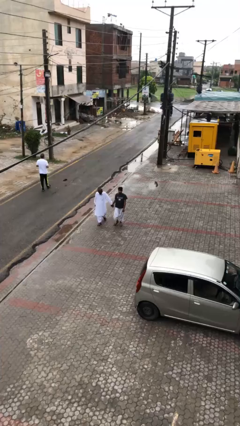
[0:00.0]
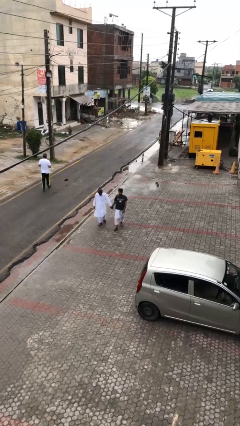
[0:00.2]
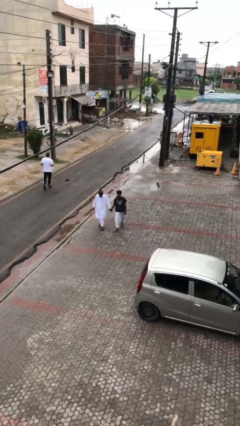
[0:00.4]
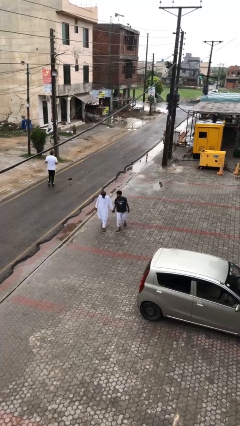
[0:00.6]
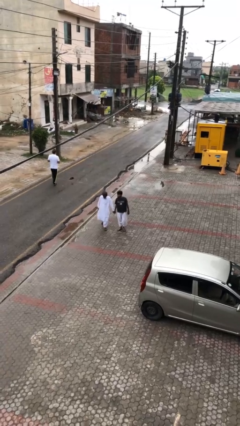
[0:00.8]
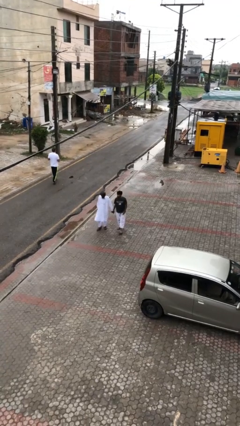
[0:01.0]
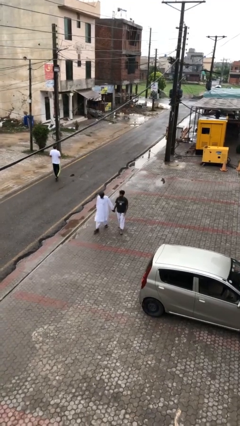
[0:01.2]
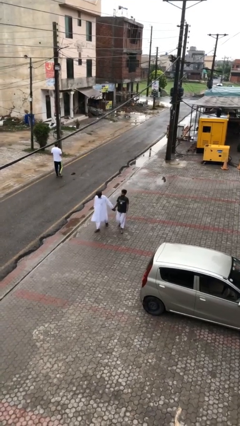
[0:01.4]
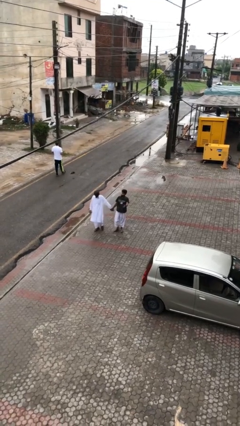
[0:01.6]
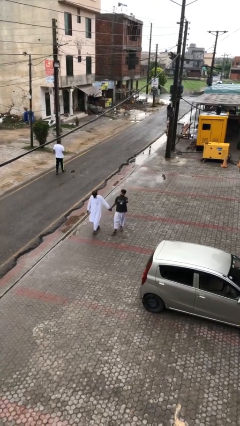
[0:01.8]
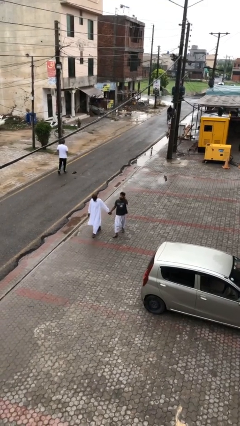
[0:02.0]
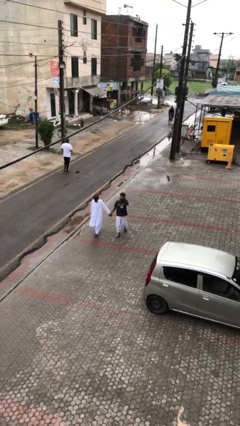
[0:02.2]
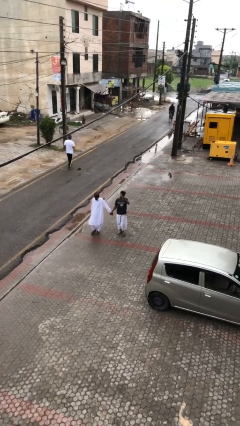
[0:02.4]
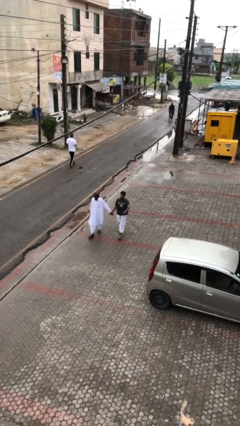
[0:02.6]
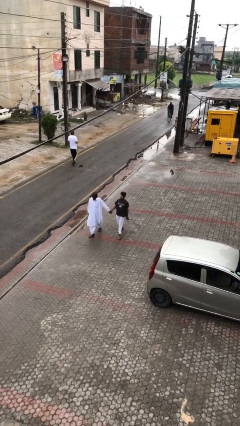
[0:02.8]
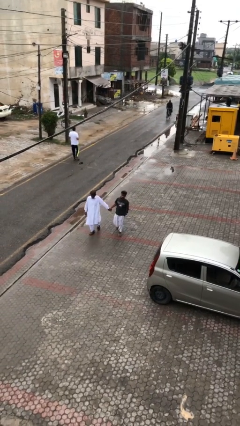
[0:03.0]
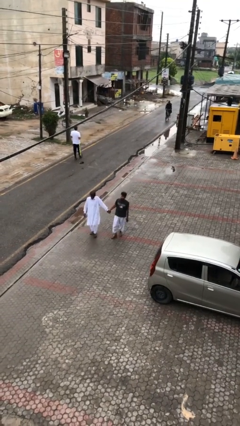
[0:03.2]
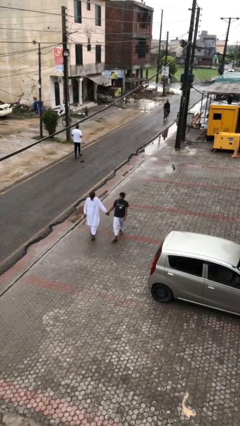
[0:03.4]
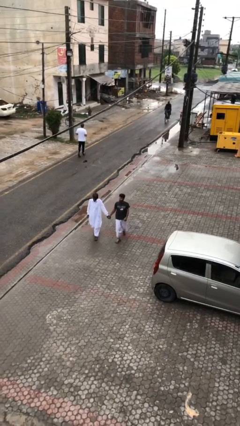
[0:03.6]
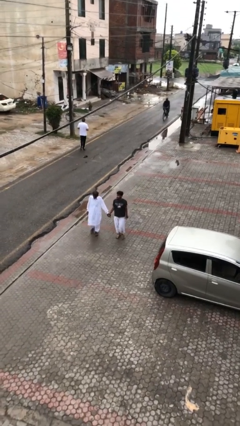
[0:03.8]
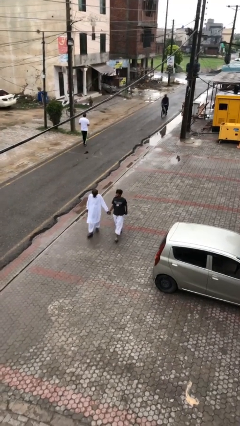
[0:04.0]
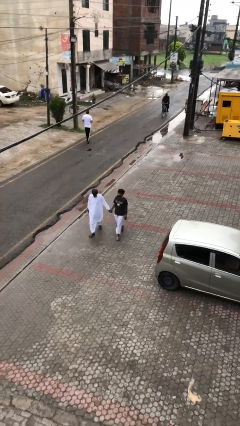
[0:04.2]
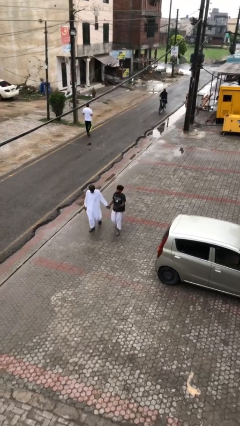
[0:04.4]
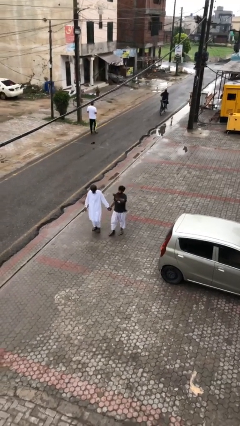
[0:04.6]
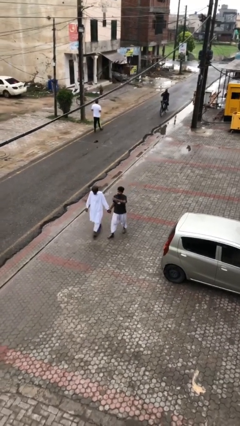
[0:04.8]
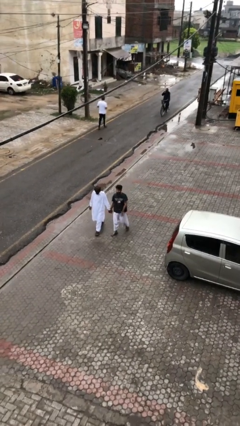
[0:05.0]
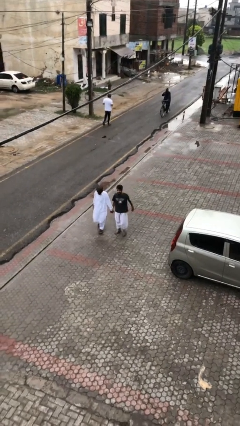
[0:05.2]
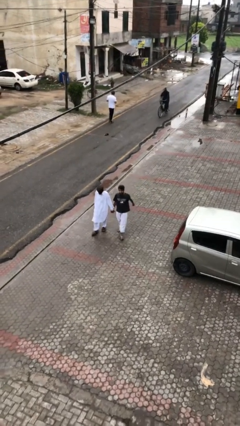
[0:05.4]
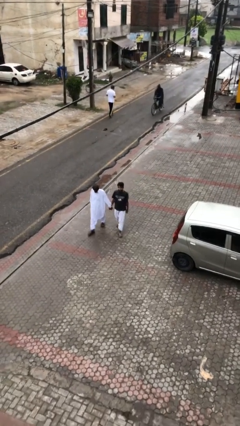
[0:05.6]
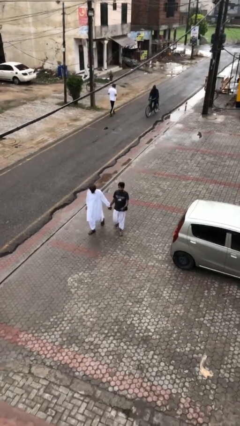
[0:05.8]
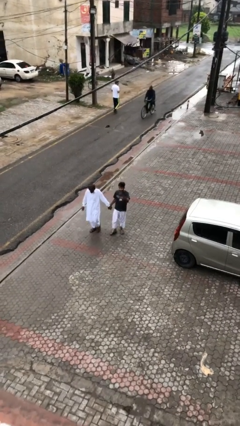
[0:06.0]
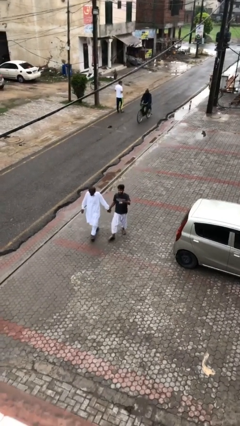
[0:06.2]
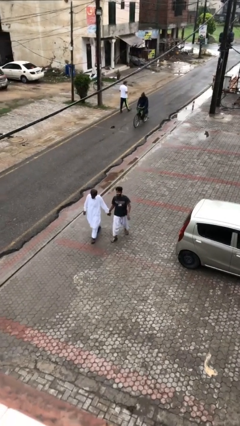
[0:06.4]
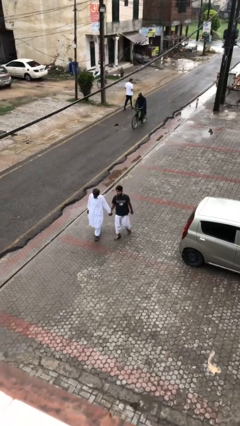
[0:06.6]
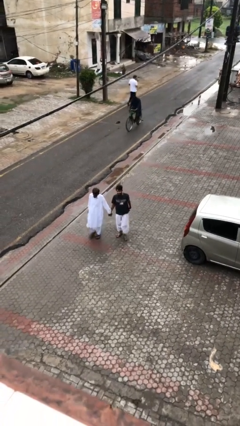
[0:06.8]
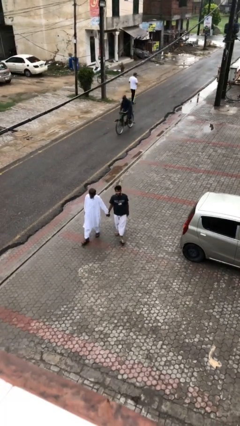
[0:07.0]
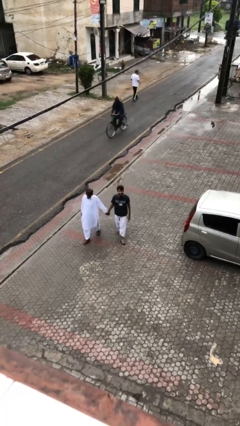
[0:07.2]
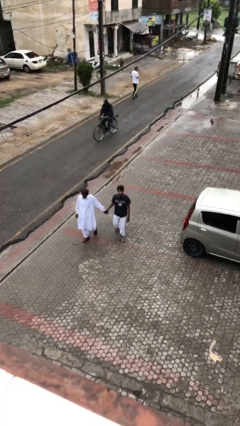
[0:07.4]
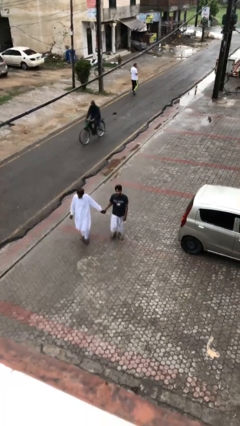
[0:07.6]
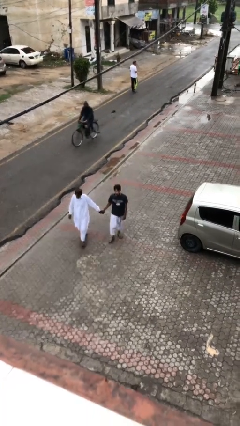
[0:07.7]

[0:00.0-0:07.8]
person holds hand

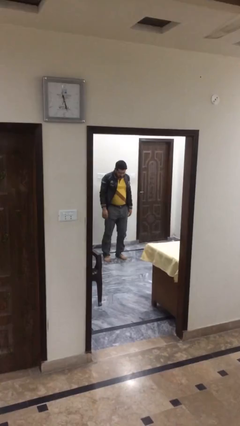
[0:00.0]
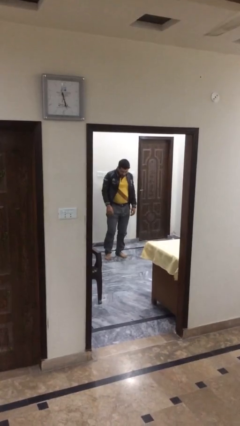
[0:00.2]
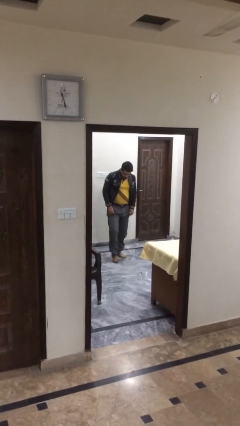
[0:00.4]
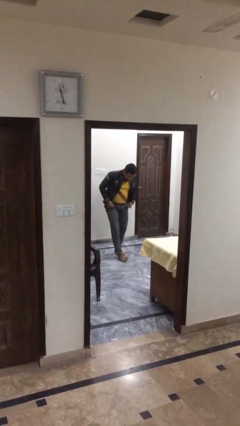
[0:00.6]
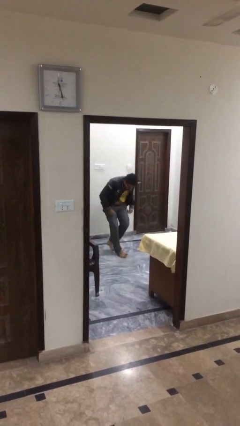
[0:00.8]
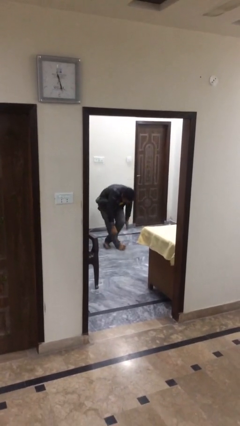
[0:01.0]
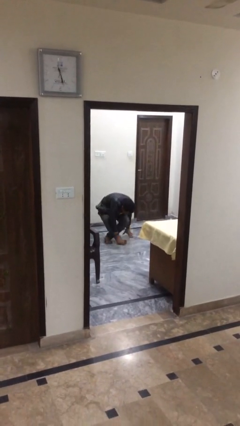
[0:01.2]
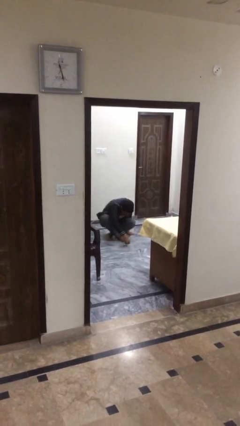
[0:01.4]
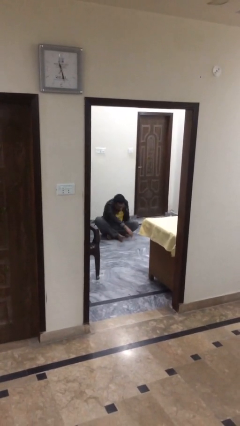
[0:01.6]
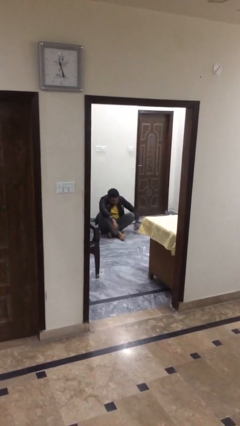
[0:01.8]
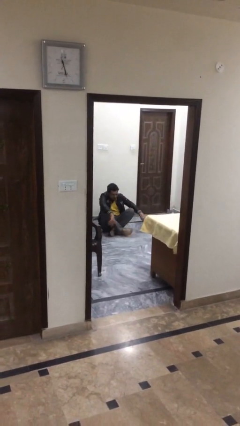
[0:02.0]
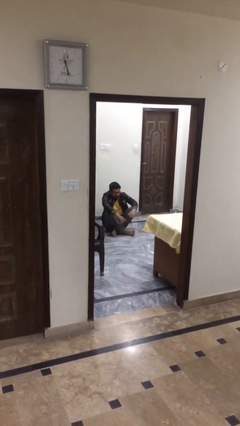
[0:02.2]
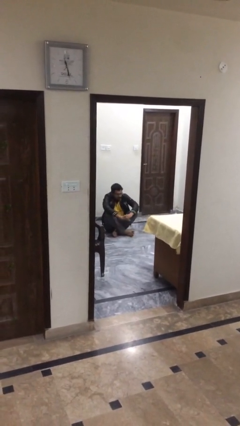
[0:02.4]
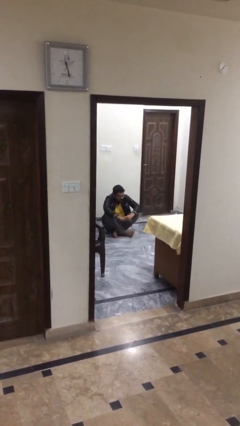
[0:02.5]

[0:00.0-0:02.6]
person sits down

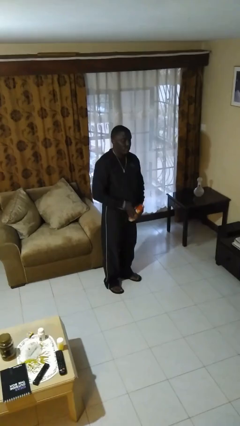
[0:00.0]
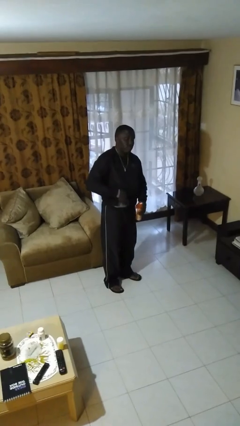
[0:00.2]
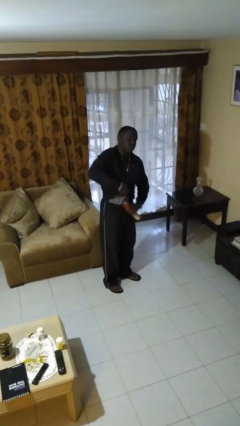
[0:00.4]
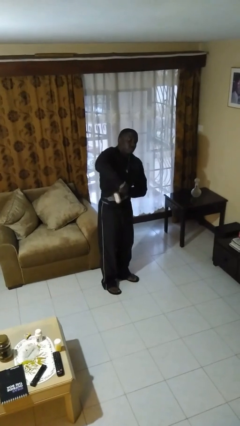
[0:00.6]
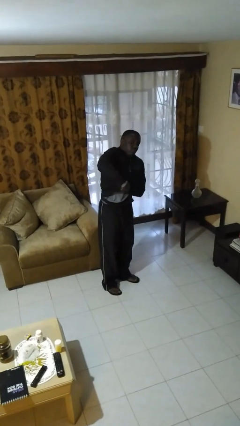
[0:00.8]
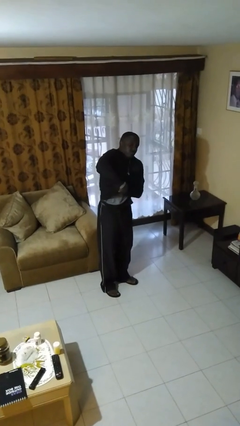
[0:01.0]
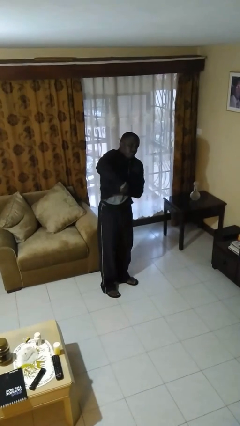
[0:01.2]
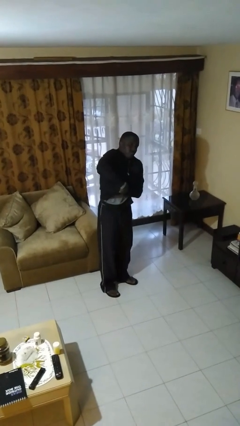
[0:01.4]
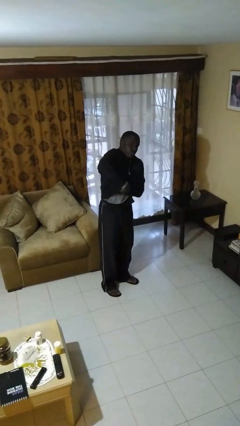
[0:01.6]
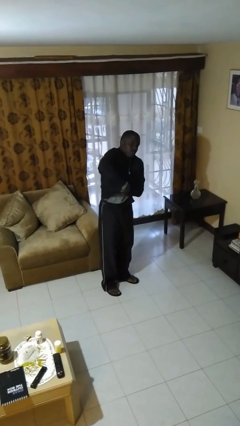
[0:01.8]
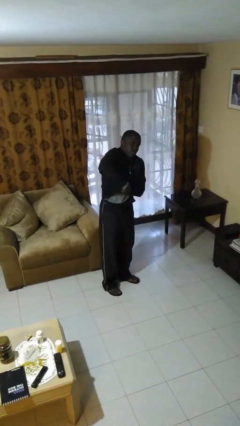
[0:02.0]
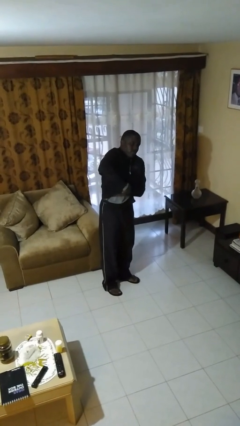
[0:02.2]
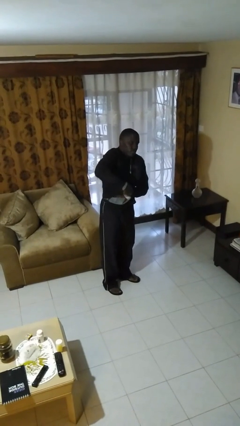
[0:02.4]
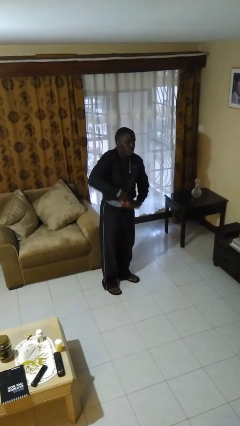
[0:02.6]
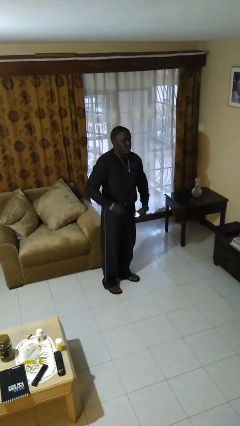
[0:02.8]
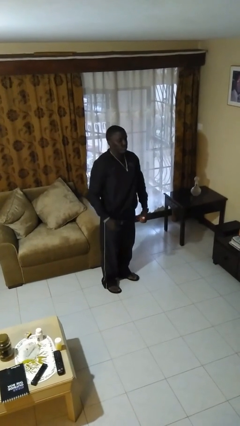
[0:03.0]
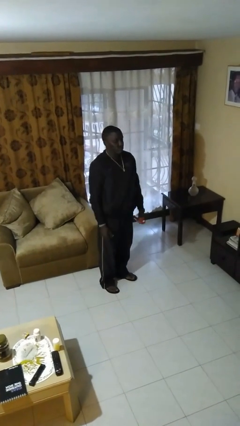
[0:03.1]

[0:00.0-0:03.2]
person applies deodorant

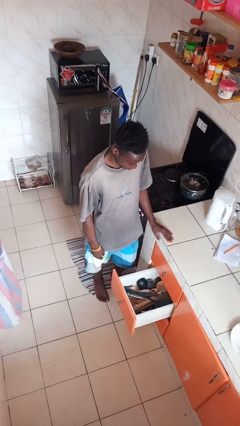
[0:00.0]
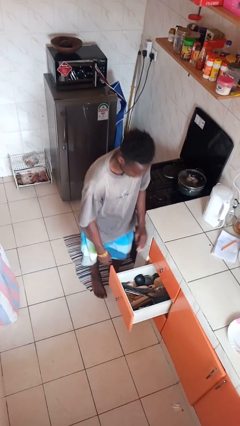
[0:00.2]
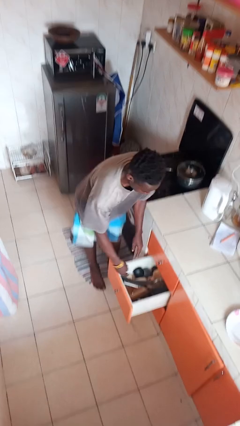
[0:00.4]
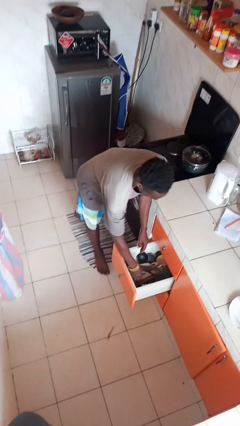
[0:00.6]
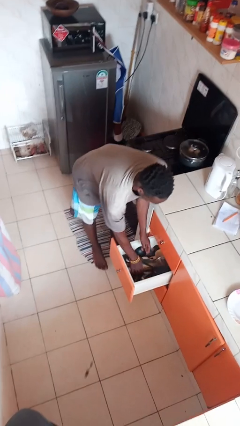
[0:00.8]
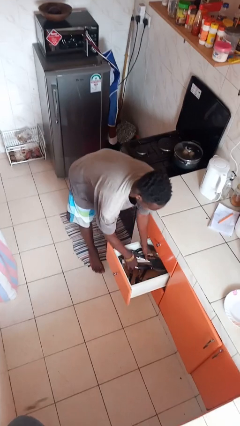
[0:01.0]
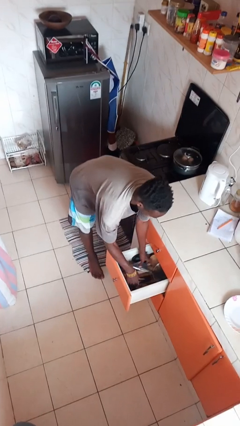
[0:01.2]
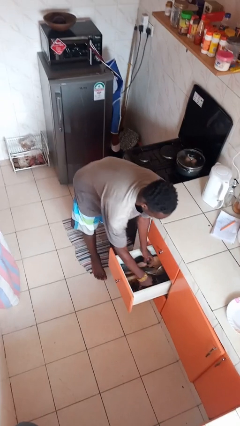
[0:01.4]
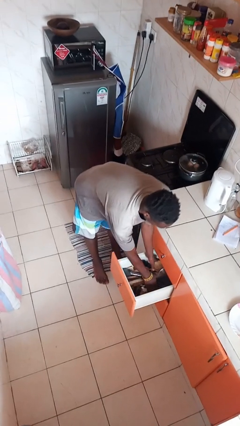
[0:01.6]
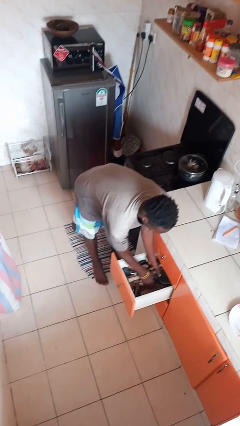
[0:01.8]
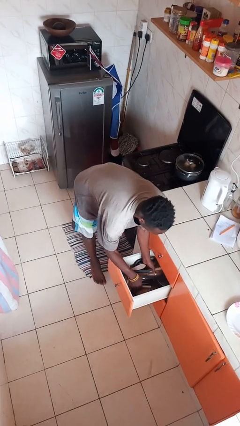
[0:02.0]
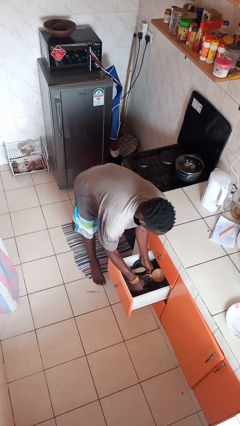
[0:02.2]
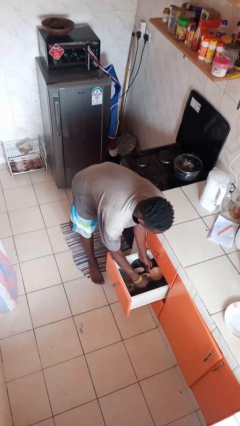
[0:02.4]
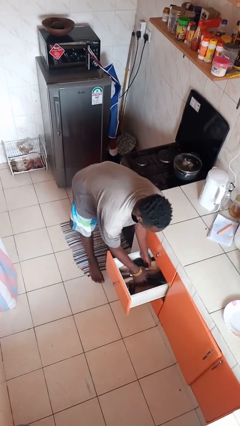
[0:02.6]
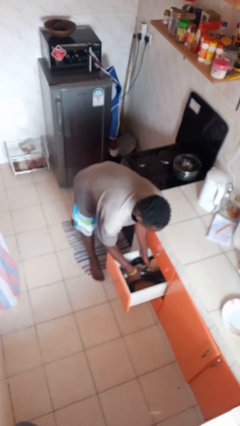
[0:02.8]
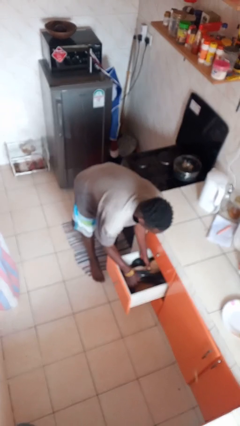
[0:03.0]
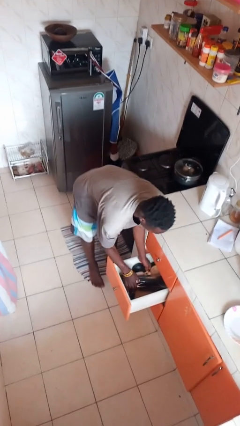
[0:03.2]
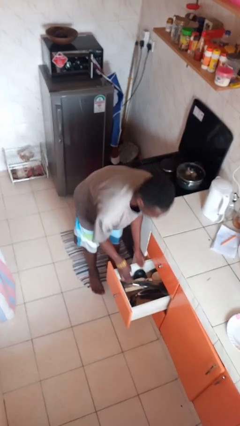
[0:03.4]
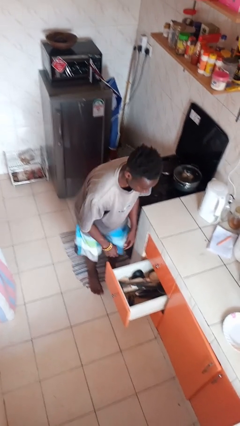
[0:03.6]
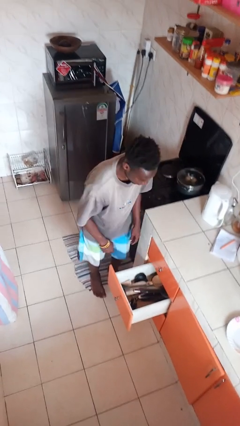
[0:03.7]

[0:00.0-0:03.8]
person searches in kitchen drawer

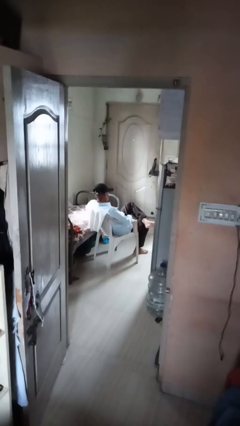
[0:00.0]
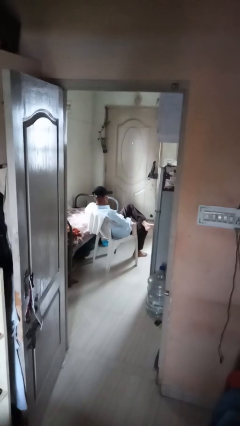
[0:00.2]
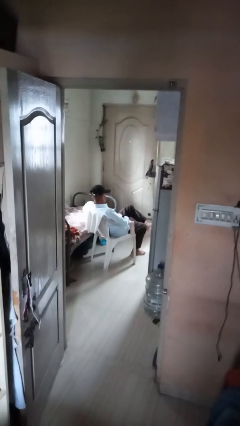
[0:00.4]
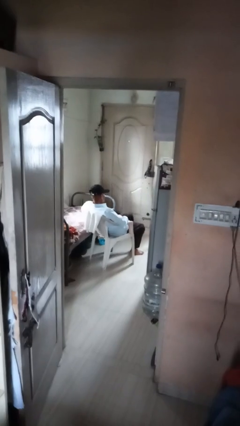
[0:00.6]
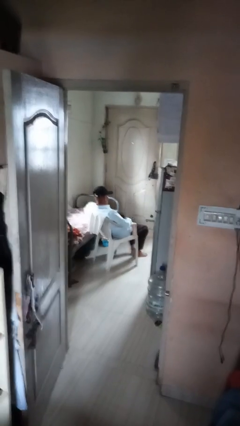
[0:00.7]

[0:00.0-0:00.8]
person crosses legs
